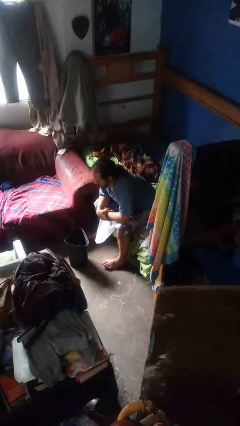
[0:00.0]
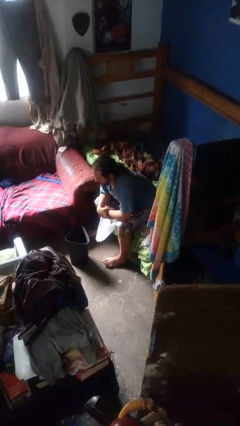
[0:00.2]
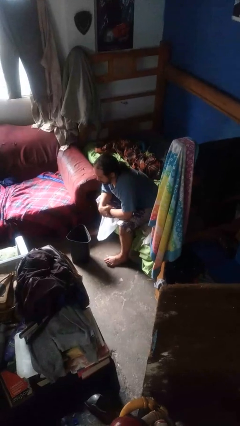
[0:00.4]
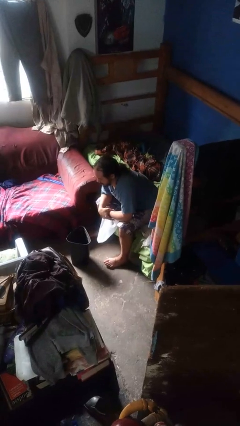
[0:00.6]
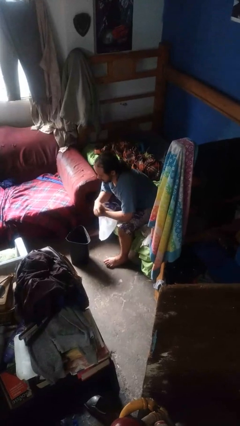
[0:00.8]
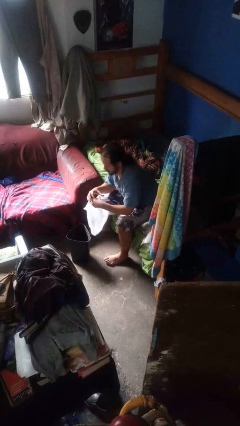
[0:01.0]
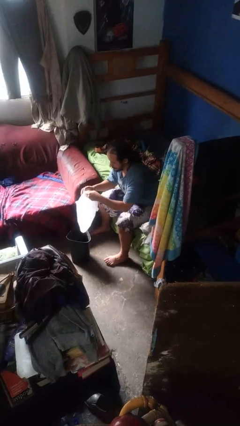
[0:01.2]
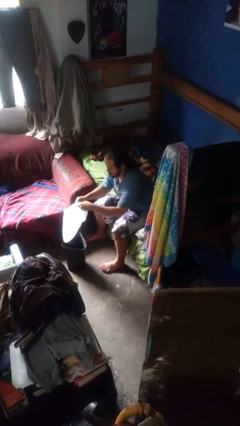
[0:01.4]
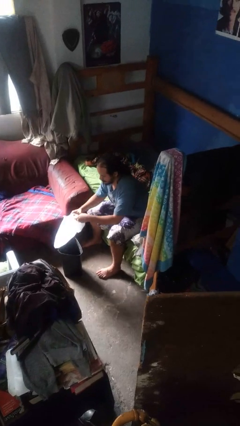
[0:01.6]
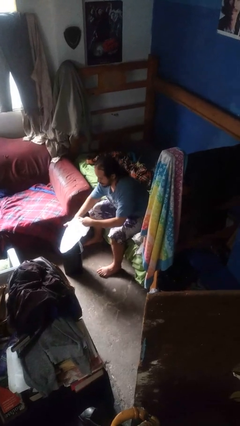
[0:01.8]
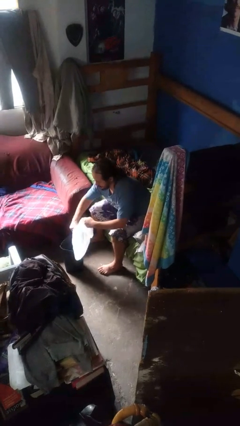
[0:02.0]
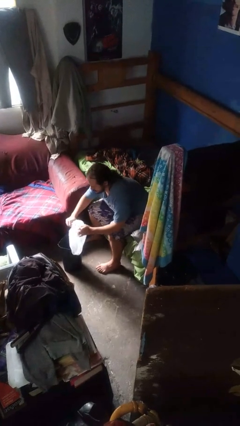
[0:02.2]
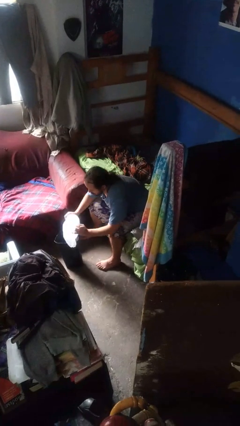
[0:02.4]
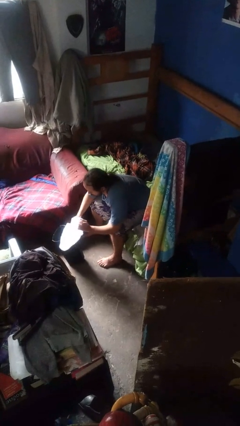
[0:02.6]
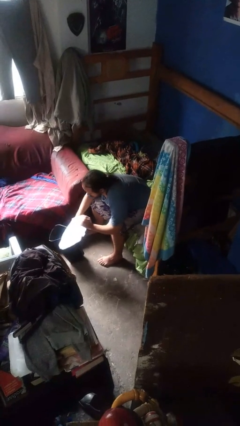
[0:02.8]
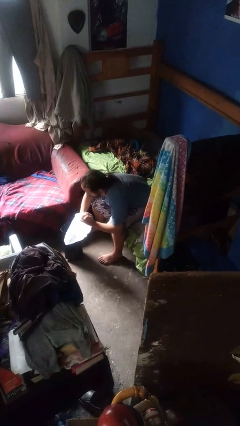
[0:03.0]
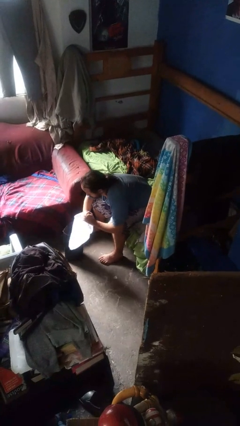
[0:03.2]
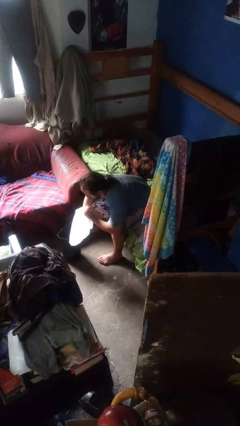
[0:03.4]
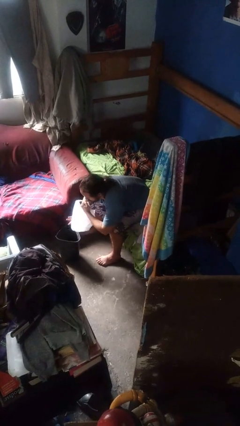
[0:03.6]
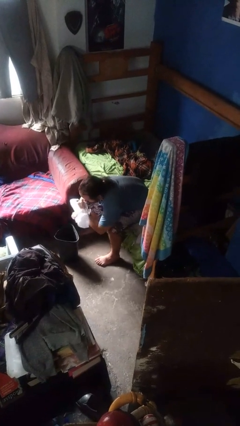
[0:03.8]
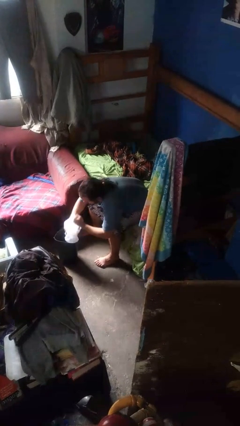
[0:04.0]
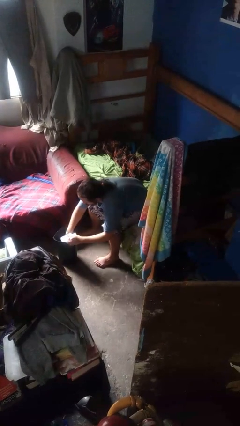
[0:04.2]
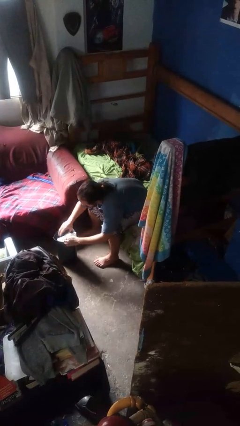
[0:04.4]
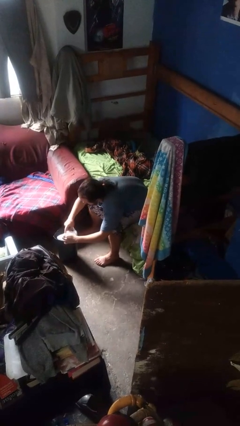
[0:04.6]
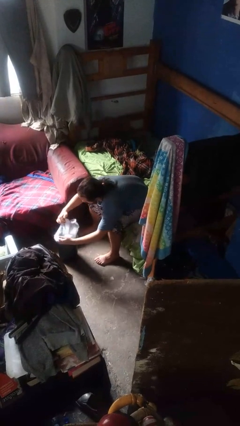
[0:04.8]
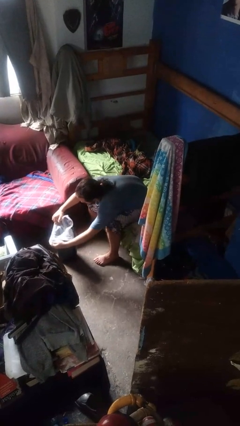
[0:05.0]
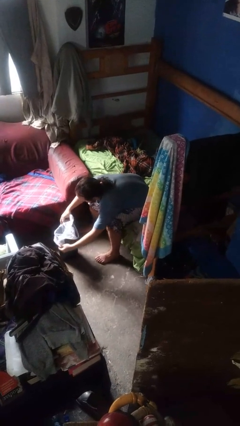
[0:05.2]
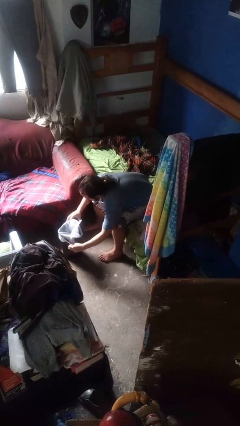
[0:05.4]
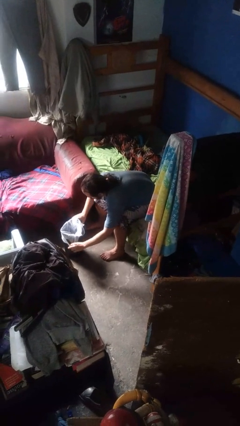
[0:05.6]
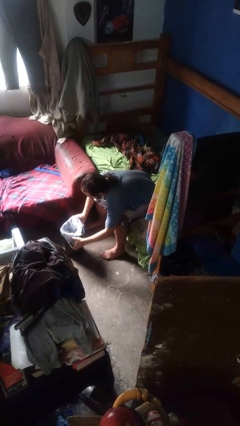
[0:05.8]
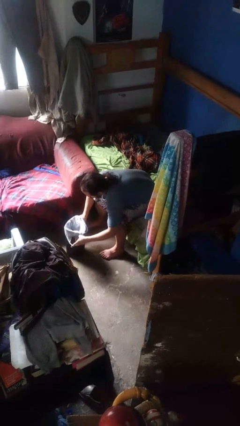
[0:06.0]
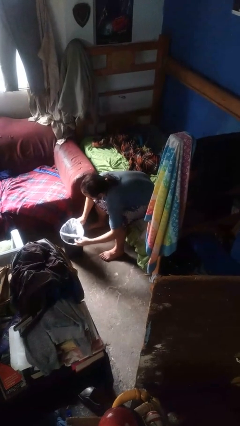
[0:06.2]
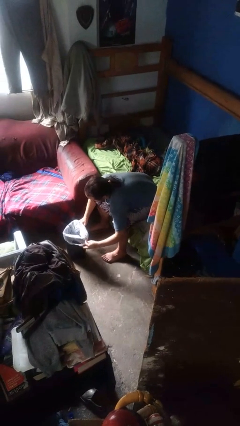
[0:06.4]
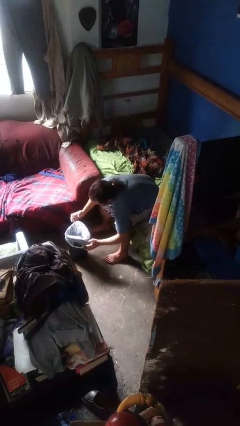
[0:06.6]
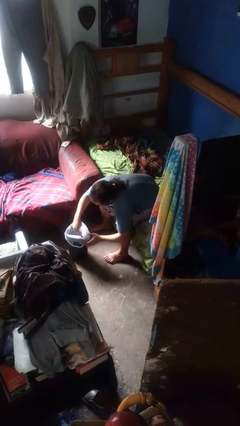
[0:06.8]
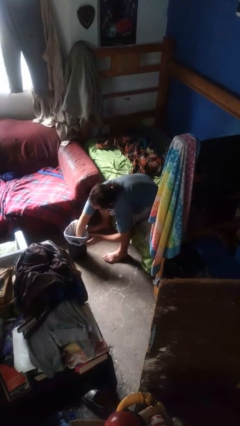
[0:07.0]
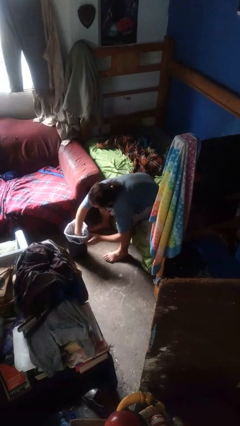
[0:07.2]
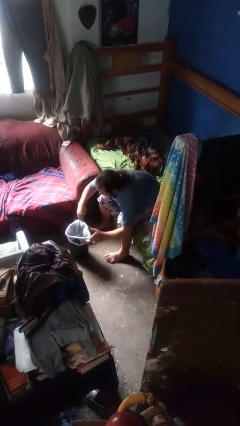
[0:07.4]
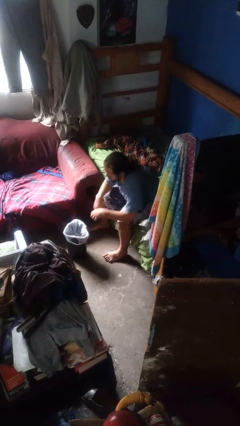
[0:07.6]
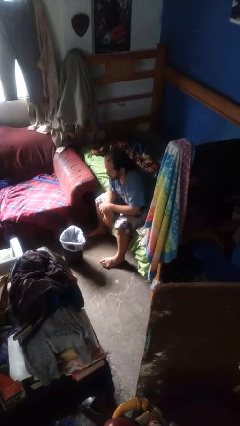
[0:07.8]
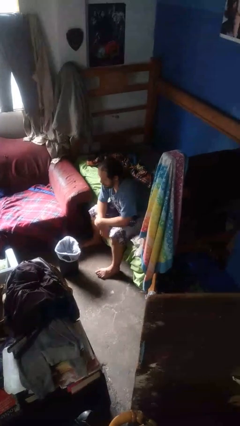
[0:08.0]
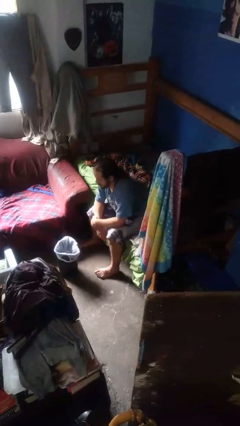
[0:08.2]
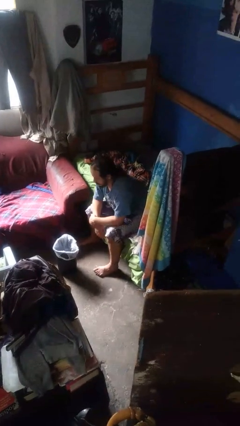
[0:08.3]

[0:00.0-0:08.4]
person inserts trashbag into trashcan

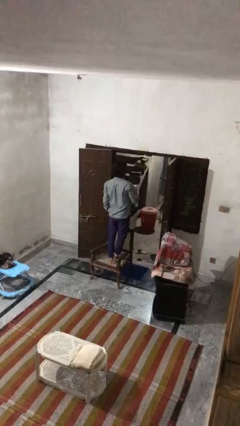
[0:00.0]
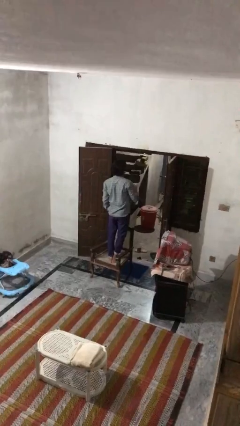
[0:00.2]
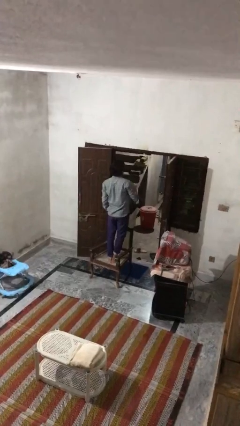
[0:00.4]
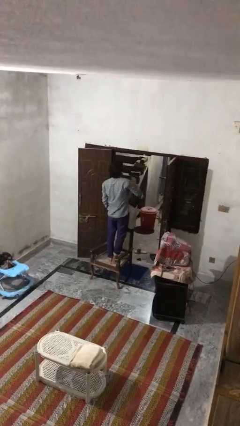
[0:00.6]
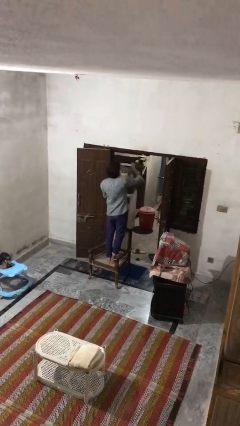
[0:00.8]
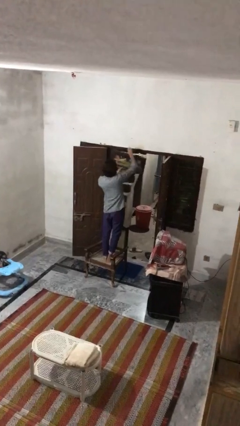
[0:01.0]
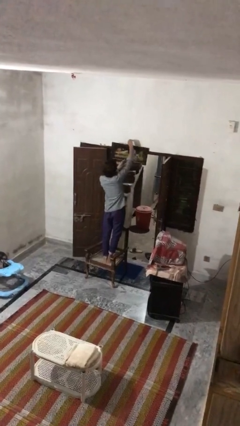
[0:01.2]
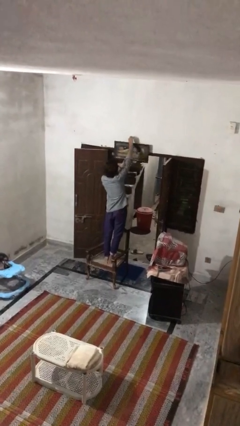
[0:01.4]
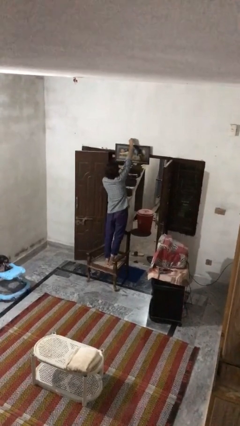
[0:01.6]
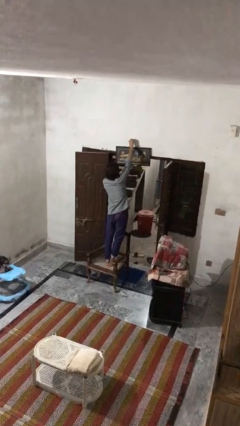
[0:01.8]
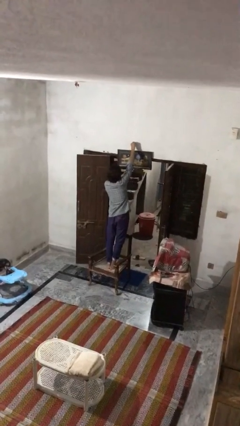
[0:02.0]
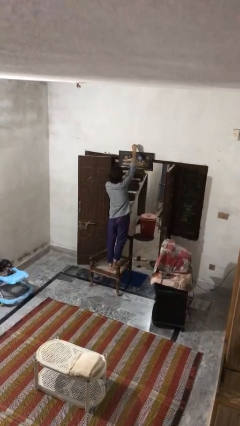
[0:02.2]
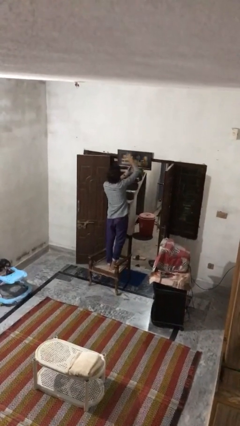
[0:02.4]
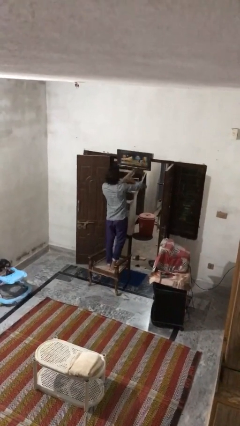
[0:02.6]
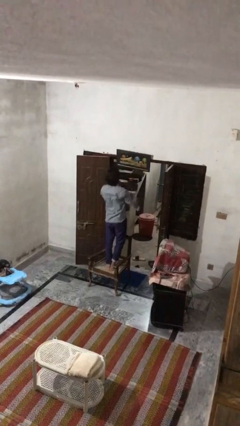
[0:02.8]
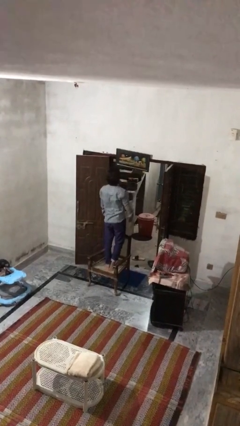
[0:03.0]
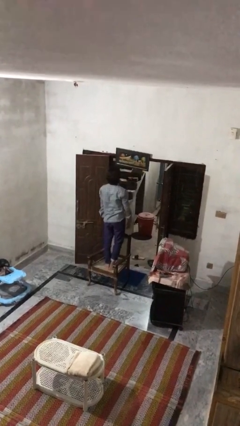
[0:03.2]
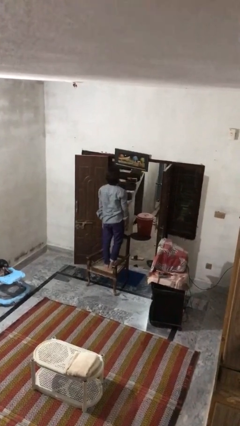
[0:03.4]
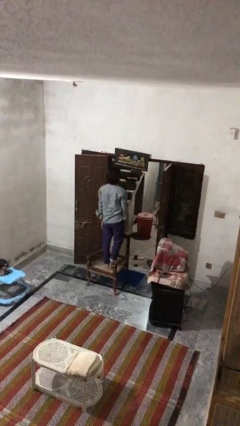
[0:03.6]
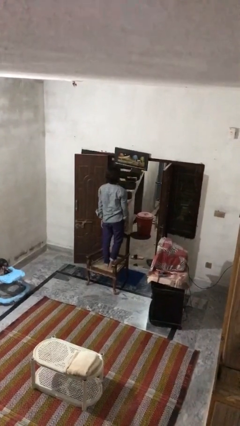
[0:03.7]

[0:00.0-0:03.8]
person puts up picture frame

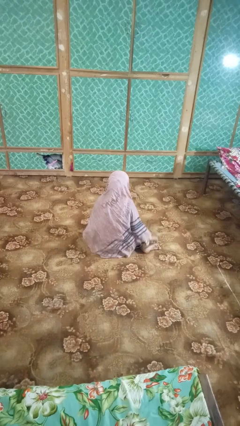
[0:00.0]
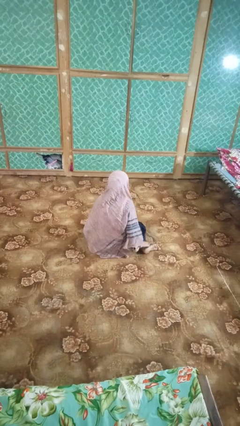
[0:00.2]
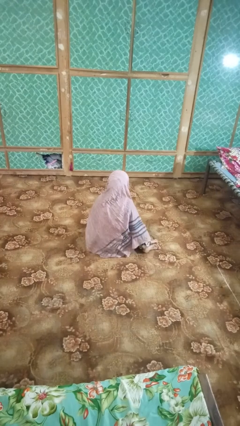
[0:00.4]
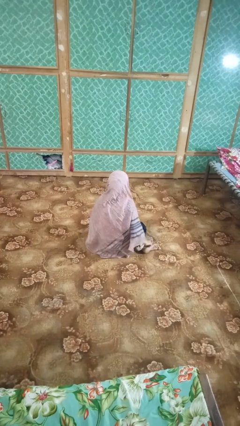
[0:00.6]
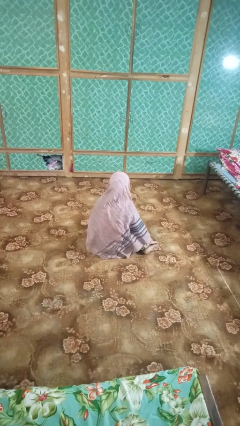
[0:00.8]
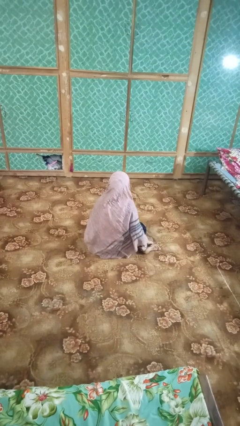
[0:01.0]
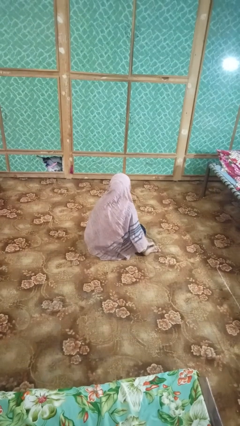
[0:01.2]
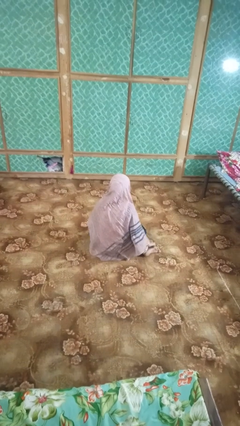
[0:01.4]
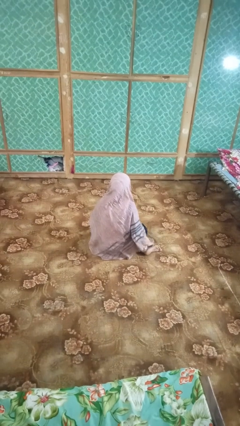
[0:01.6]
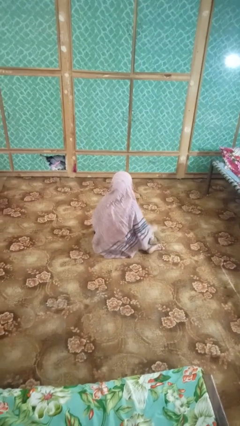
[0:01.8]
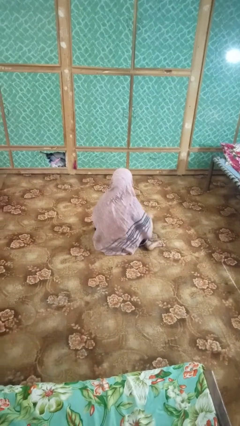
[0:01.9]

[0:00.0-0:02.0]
person rubs foot

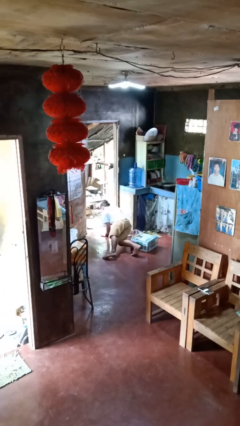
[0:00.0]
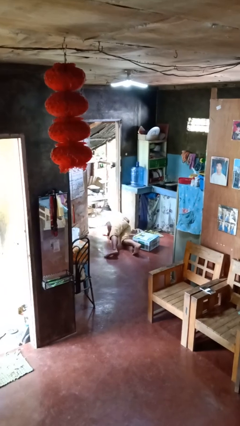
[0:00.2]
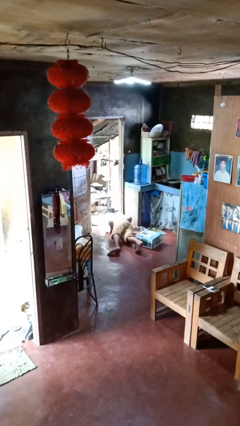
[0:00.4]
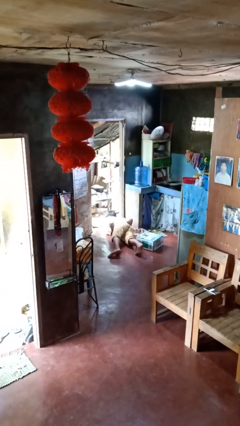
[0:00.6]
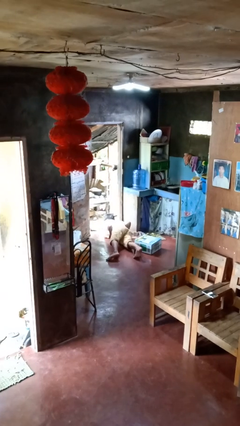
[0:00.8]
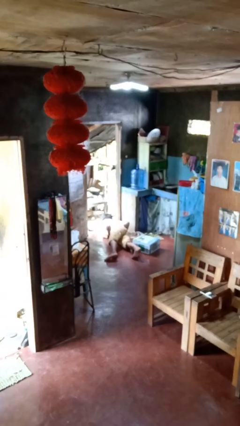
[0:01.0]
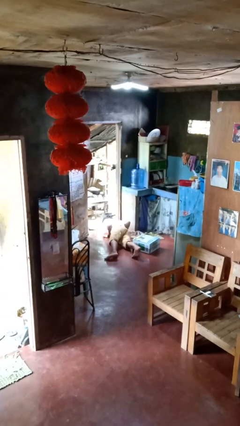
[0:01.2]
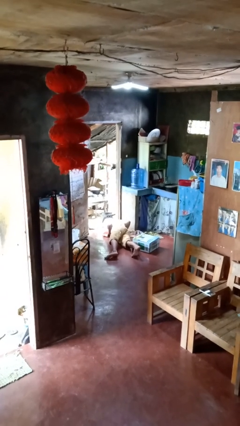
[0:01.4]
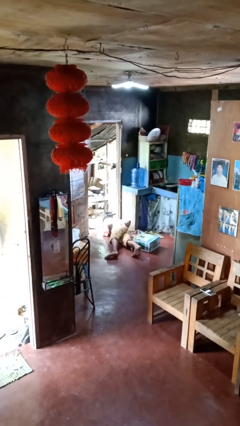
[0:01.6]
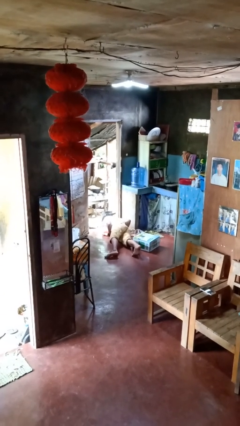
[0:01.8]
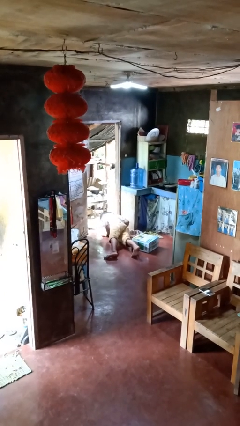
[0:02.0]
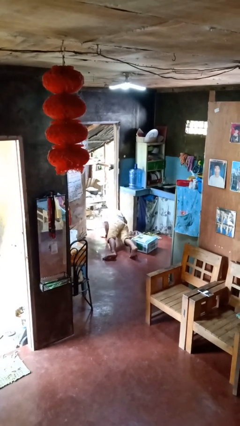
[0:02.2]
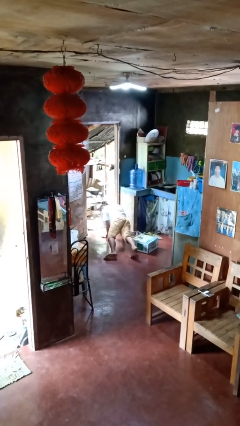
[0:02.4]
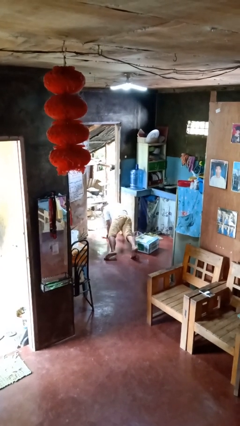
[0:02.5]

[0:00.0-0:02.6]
person lies down on floor

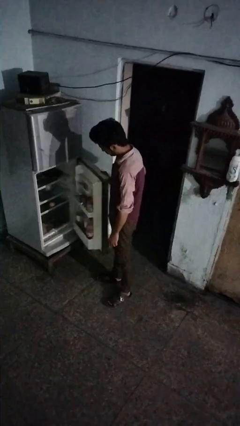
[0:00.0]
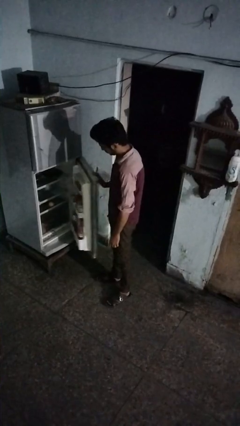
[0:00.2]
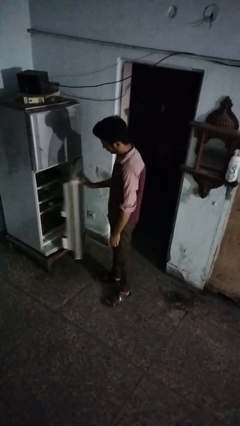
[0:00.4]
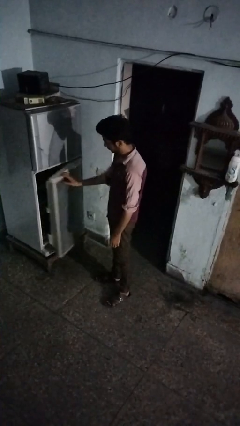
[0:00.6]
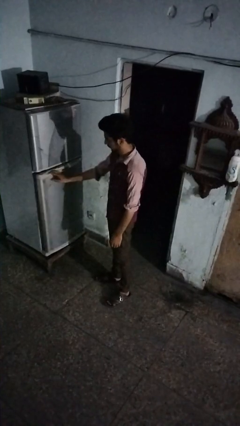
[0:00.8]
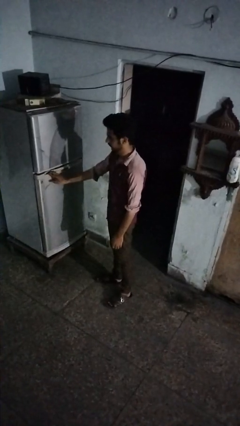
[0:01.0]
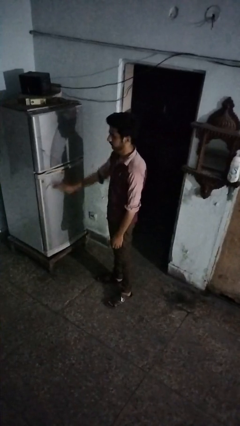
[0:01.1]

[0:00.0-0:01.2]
person closes refrigerator
